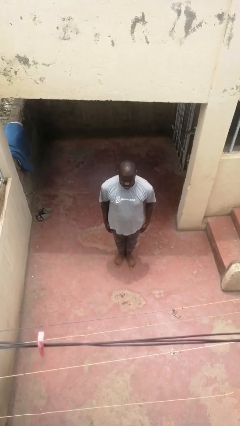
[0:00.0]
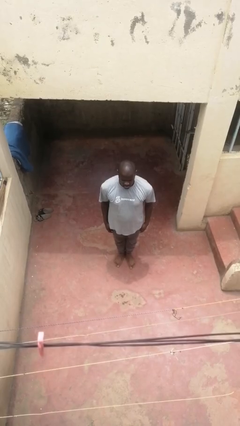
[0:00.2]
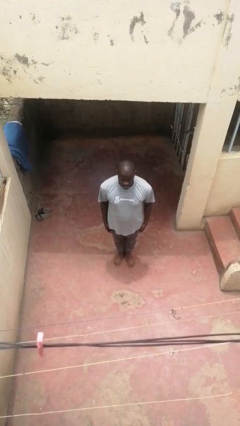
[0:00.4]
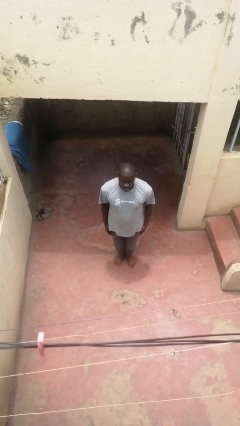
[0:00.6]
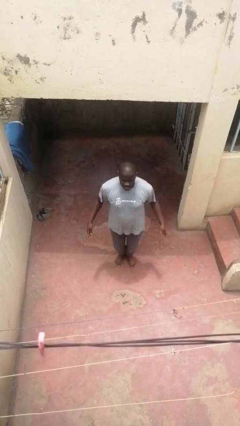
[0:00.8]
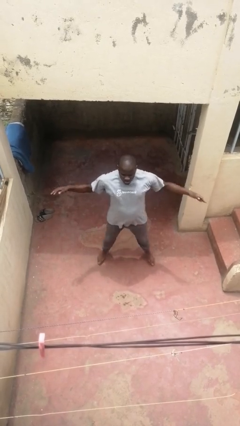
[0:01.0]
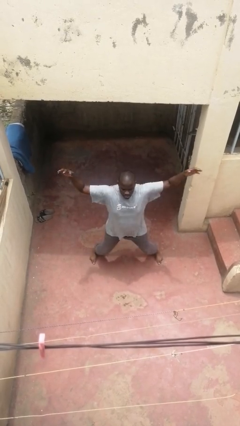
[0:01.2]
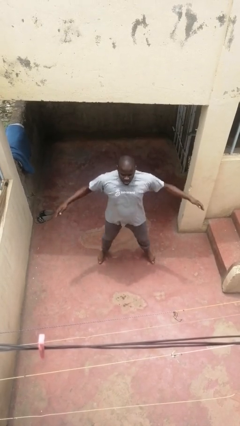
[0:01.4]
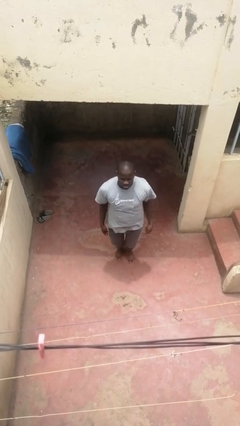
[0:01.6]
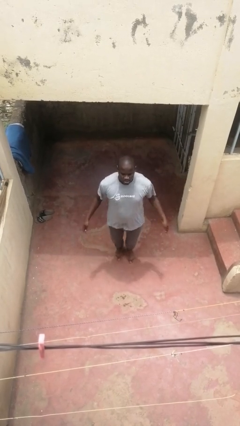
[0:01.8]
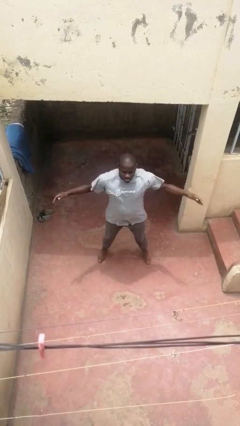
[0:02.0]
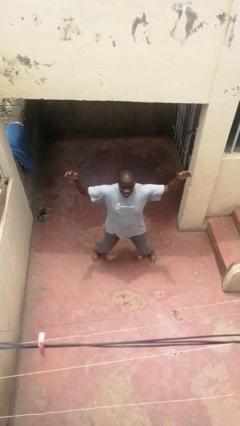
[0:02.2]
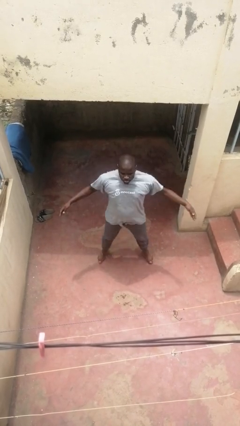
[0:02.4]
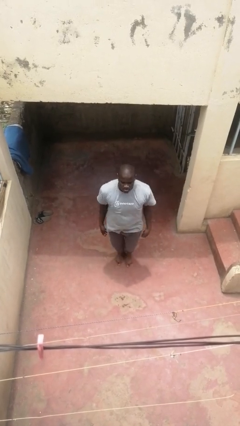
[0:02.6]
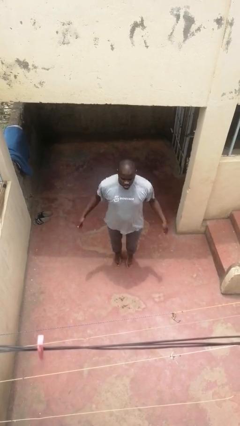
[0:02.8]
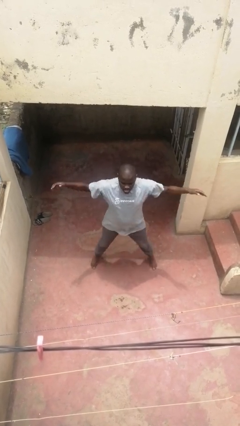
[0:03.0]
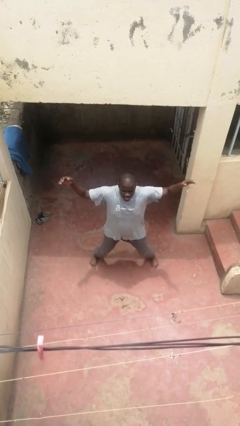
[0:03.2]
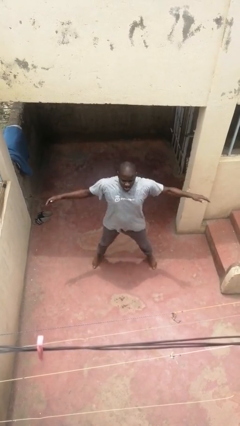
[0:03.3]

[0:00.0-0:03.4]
person exercises with jumping jacks

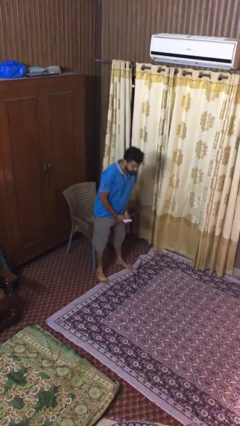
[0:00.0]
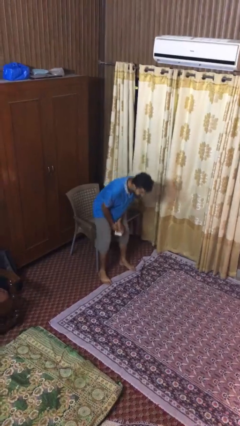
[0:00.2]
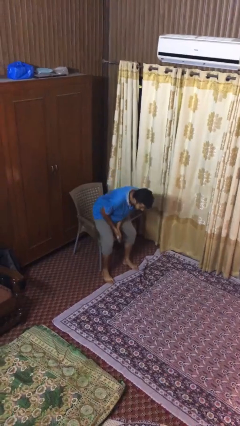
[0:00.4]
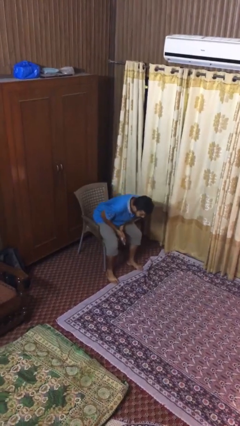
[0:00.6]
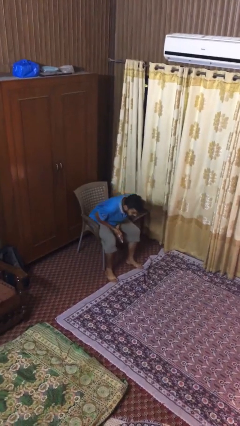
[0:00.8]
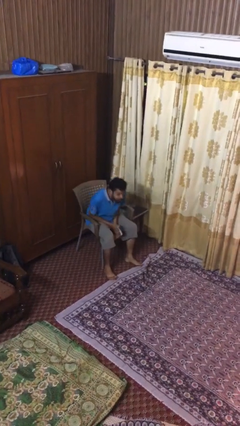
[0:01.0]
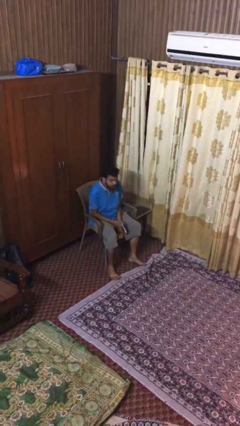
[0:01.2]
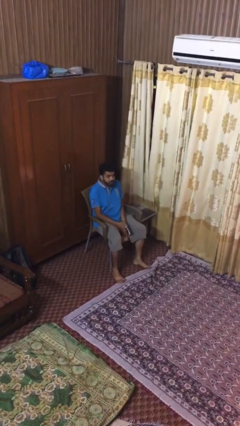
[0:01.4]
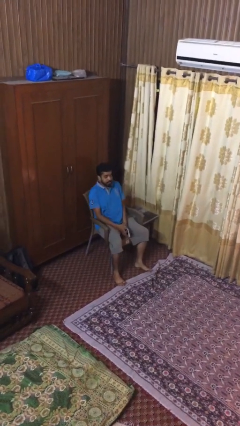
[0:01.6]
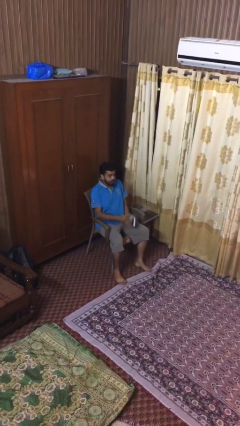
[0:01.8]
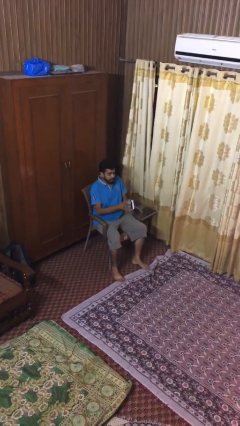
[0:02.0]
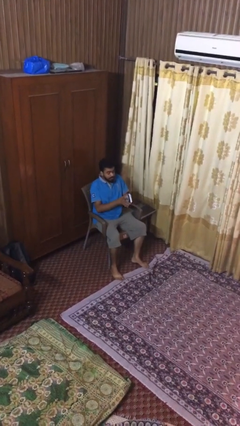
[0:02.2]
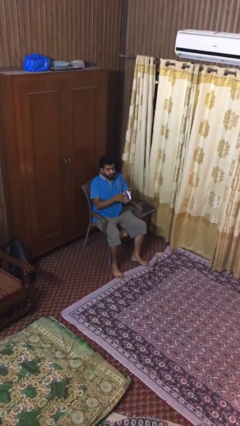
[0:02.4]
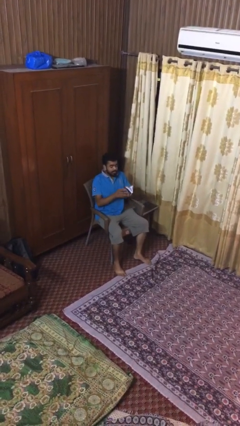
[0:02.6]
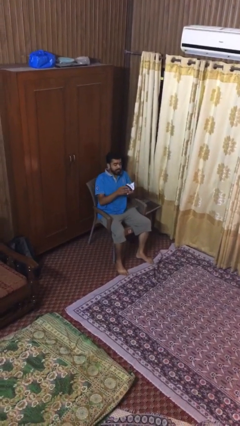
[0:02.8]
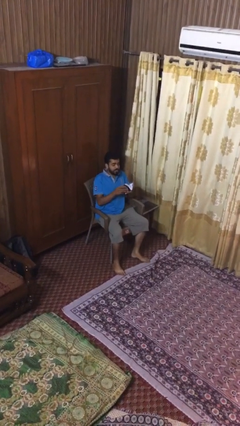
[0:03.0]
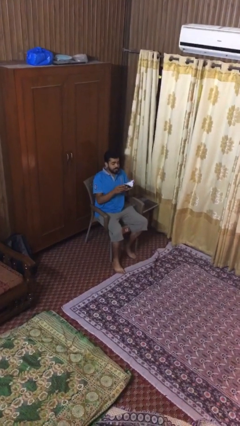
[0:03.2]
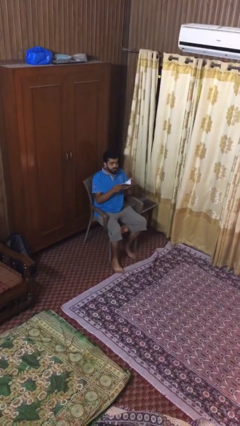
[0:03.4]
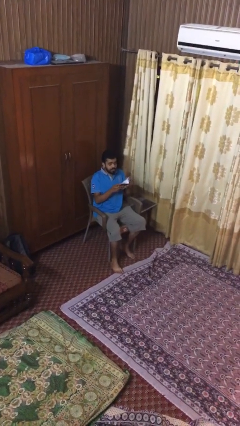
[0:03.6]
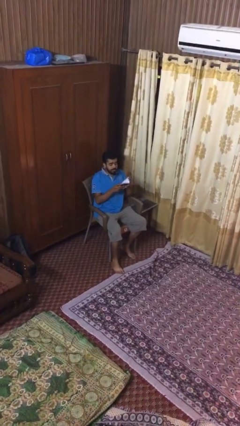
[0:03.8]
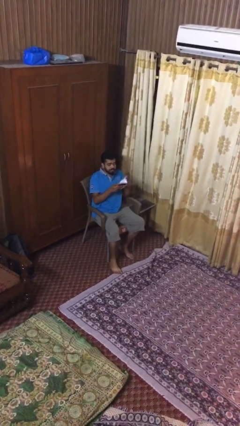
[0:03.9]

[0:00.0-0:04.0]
person sits down

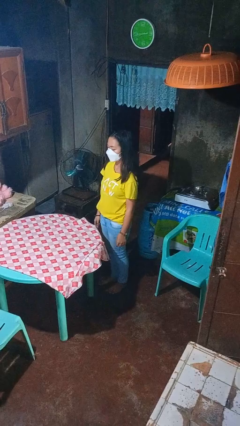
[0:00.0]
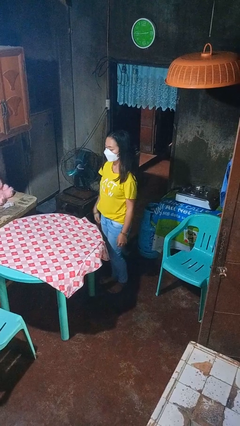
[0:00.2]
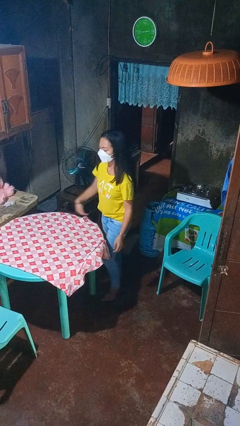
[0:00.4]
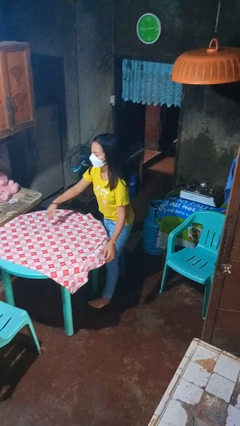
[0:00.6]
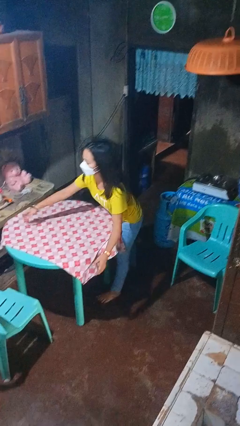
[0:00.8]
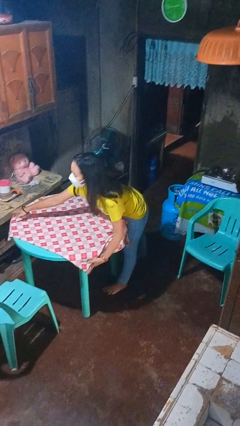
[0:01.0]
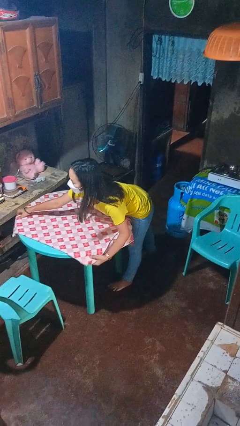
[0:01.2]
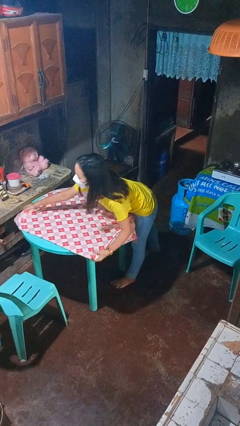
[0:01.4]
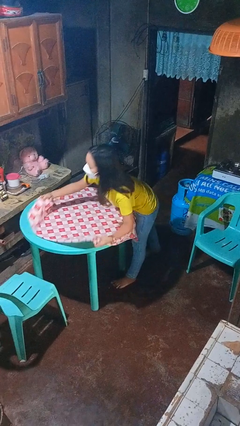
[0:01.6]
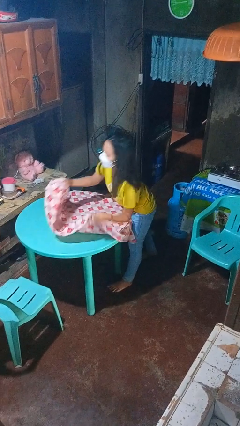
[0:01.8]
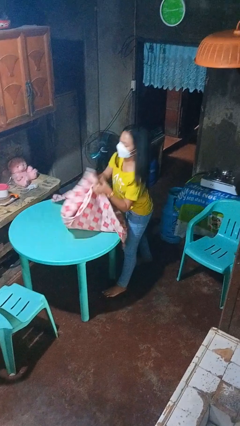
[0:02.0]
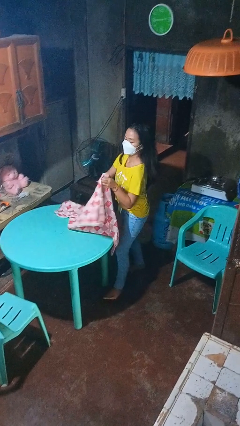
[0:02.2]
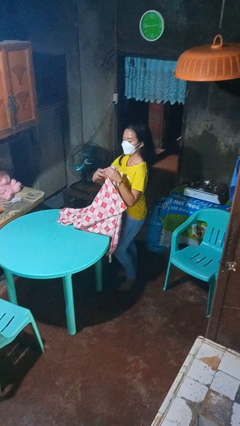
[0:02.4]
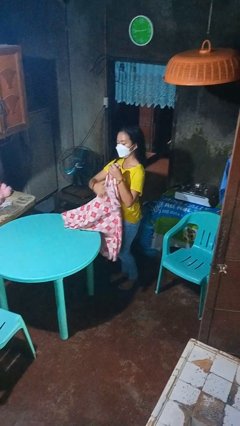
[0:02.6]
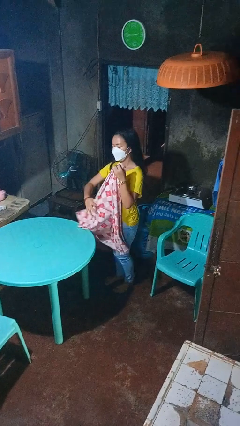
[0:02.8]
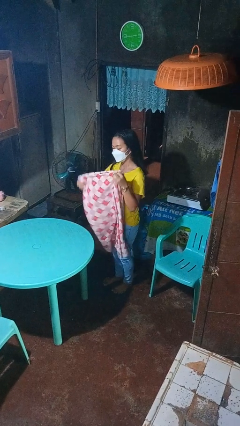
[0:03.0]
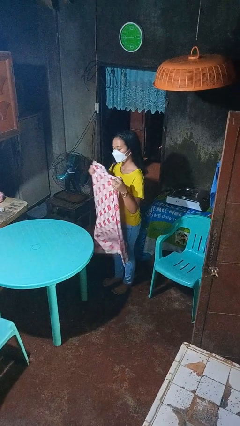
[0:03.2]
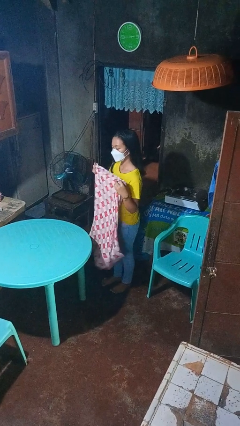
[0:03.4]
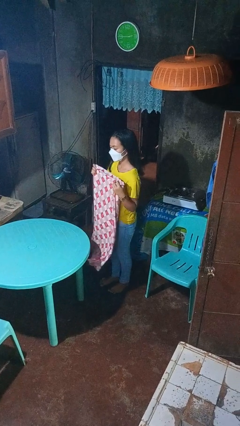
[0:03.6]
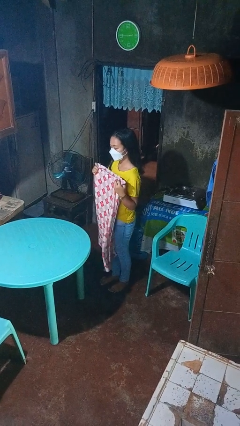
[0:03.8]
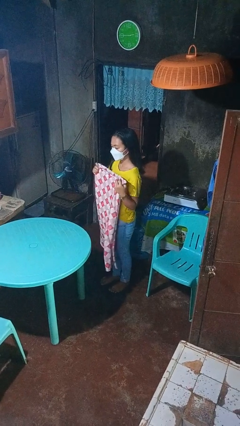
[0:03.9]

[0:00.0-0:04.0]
person folds tablecloth

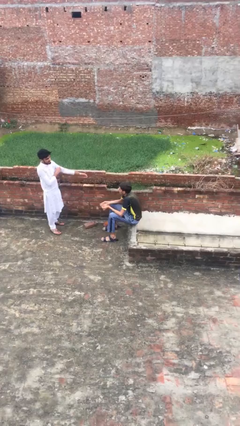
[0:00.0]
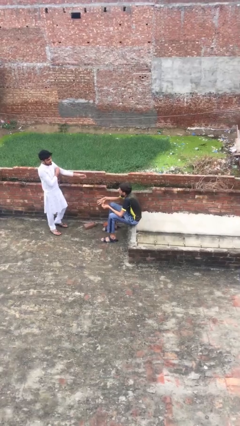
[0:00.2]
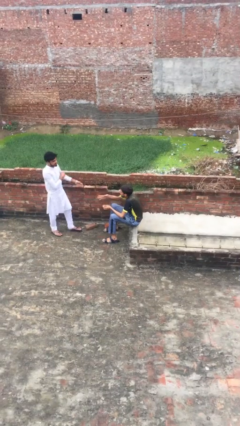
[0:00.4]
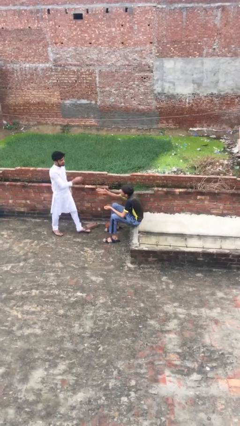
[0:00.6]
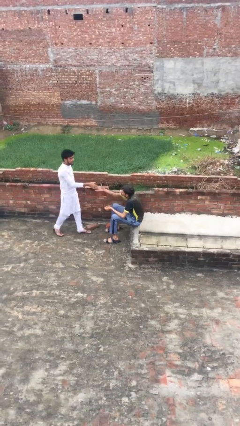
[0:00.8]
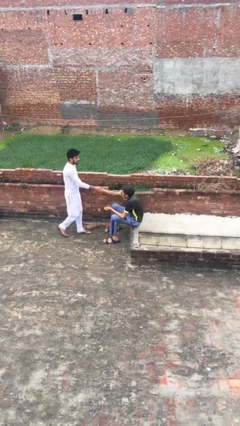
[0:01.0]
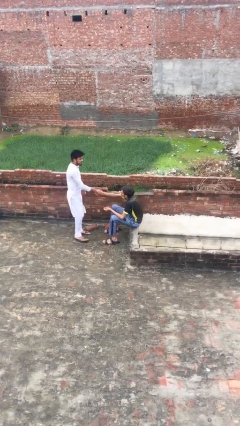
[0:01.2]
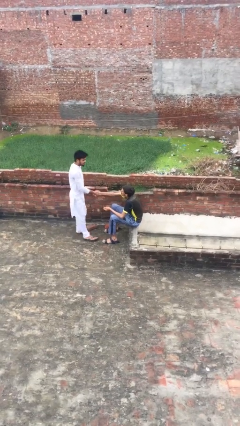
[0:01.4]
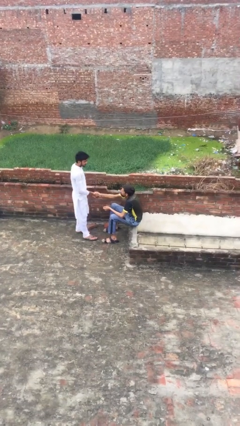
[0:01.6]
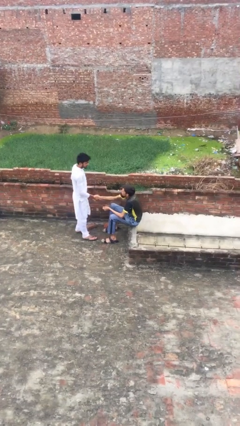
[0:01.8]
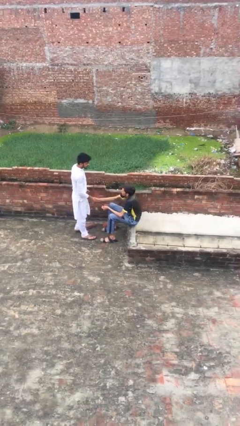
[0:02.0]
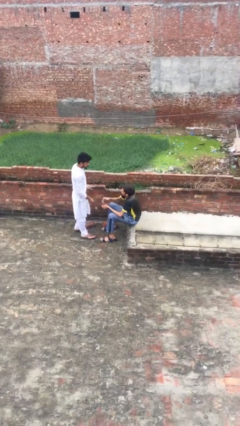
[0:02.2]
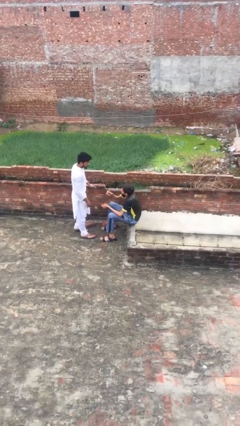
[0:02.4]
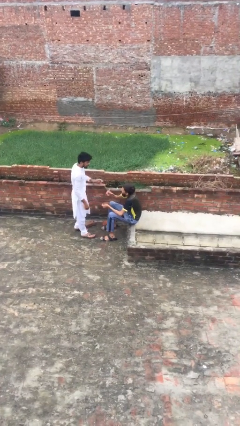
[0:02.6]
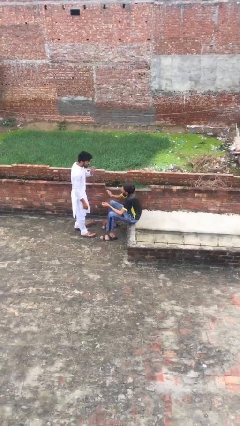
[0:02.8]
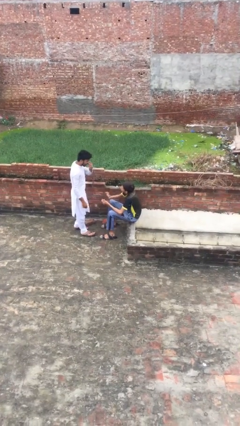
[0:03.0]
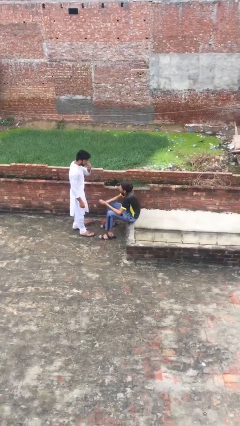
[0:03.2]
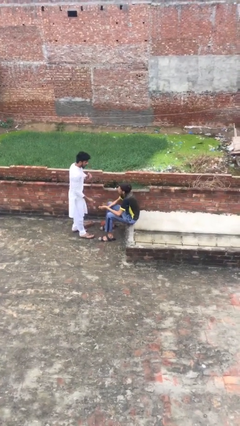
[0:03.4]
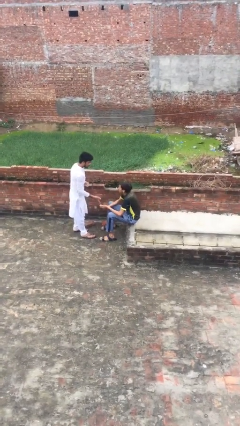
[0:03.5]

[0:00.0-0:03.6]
person shakes hand

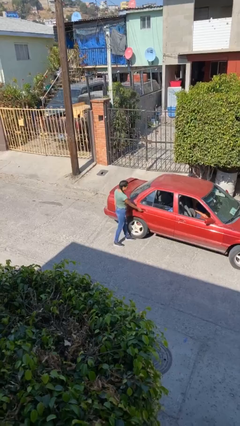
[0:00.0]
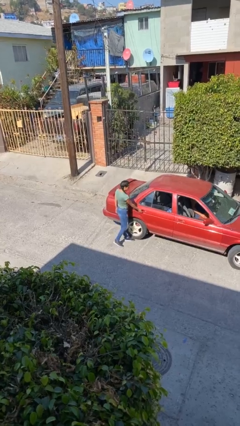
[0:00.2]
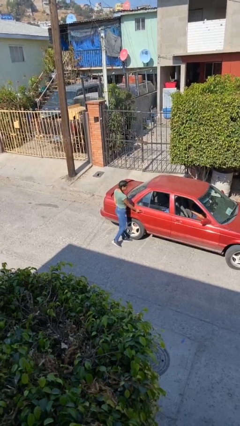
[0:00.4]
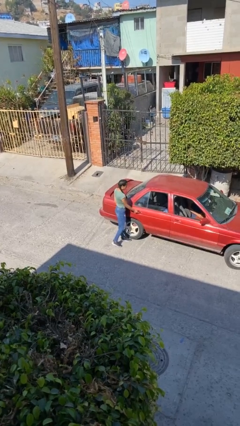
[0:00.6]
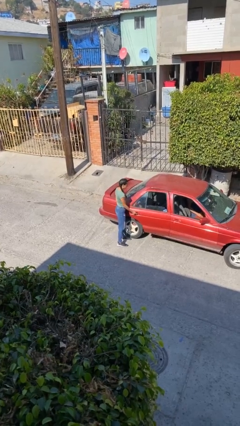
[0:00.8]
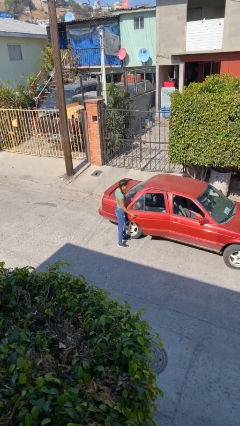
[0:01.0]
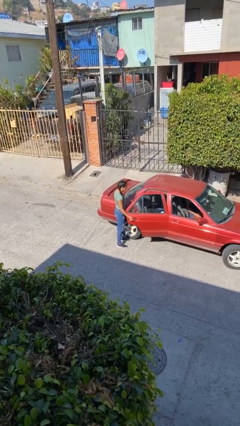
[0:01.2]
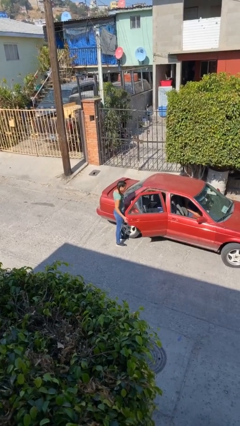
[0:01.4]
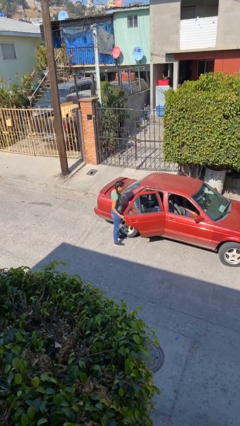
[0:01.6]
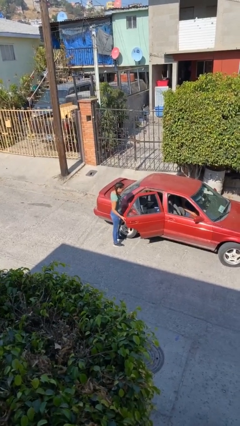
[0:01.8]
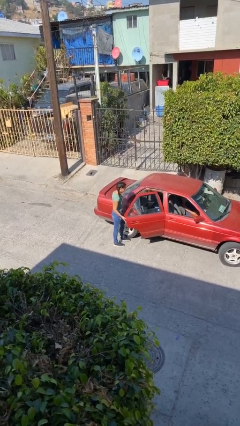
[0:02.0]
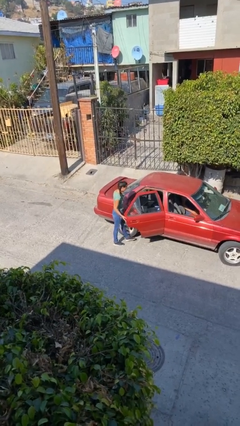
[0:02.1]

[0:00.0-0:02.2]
person opens car door

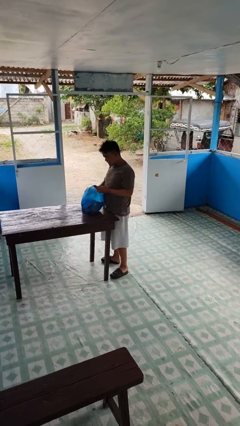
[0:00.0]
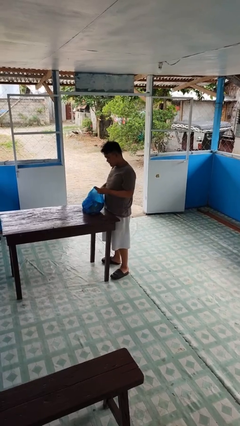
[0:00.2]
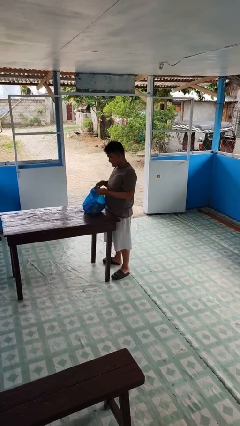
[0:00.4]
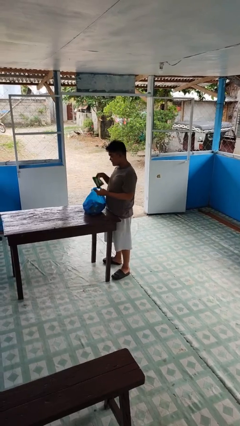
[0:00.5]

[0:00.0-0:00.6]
person takes object from bag
